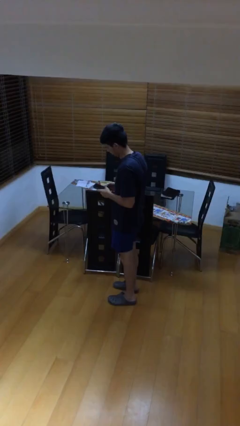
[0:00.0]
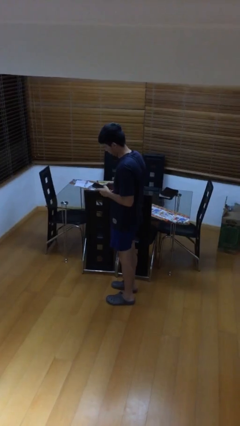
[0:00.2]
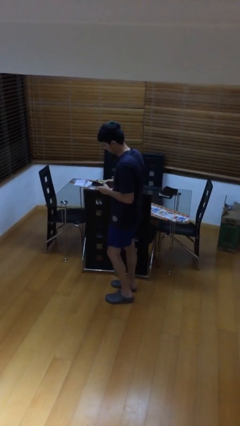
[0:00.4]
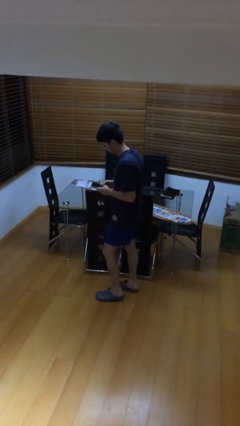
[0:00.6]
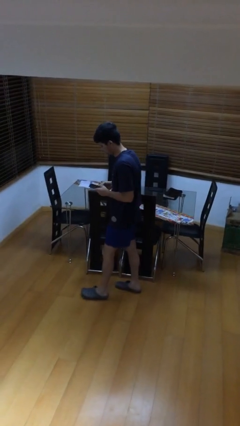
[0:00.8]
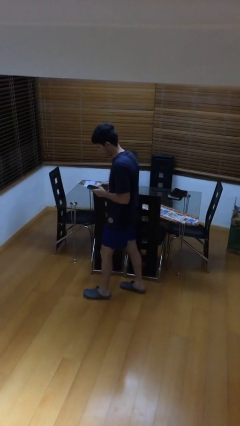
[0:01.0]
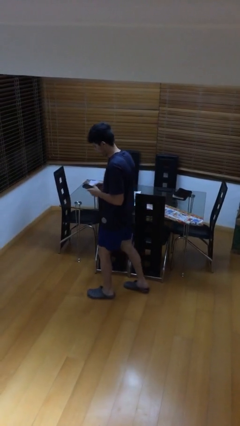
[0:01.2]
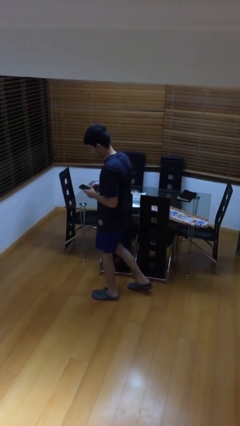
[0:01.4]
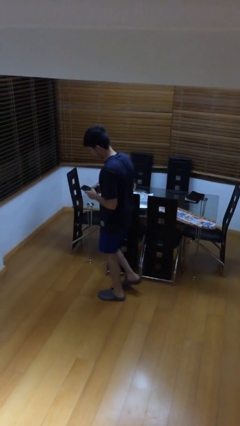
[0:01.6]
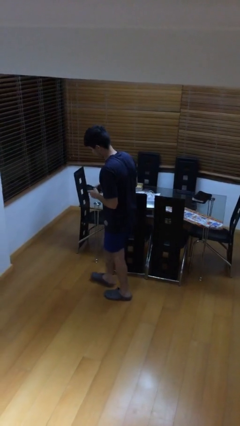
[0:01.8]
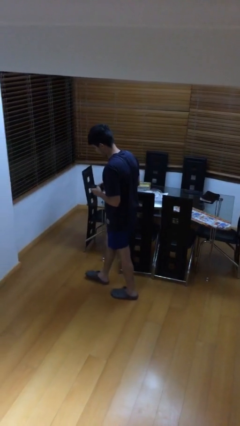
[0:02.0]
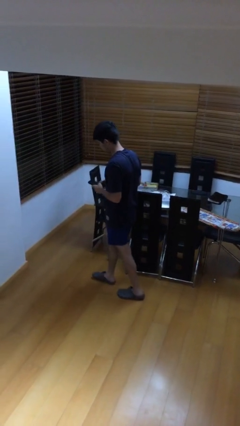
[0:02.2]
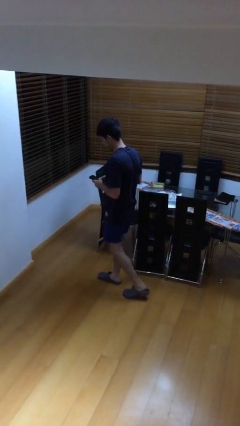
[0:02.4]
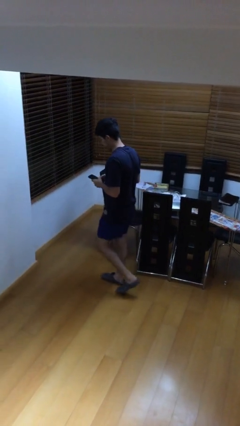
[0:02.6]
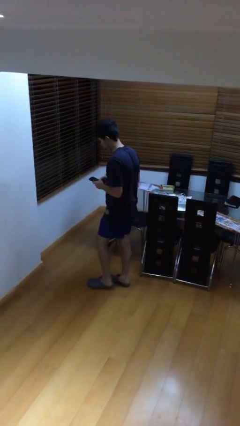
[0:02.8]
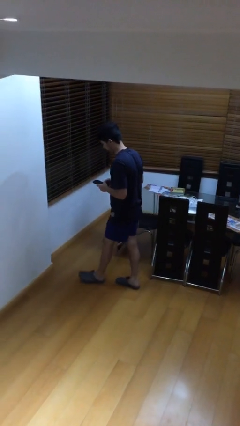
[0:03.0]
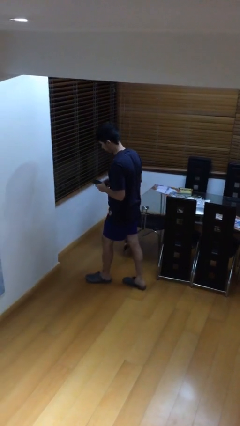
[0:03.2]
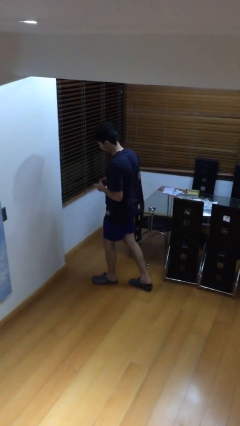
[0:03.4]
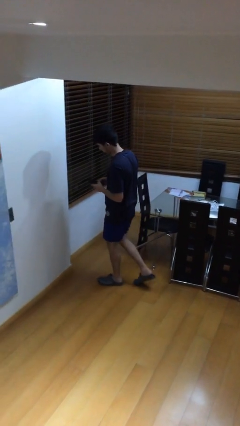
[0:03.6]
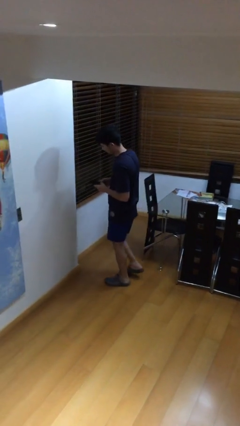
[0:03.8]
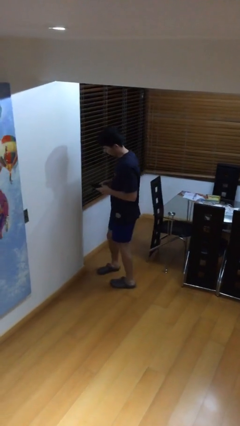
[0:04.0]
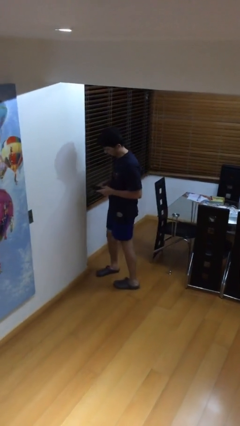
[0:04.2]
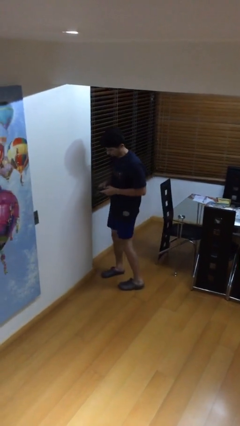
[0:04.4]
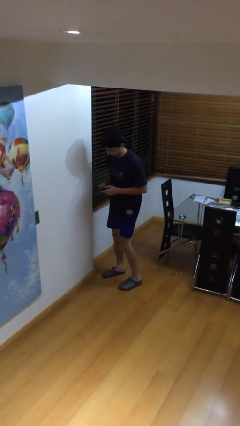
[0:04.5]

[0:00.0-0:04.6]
person texts on phone

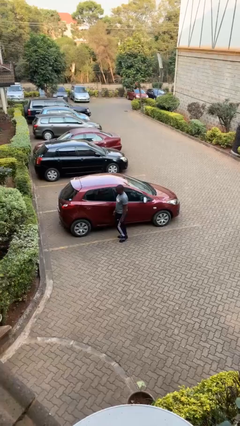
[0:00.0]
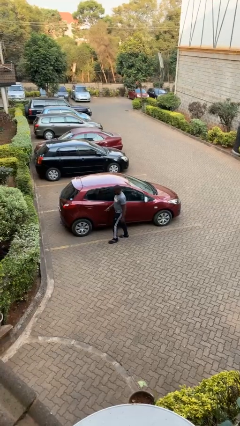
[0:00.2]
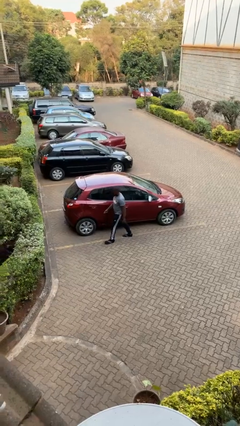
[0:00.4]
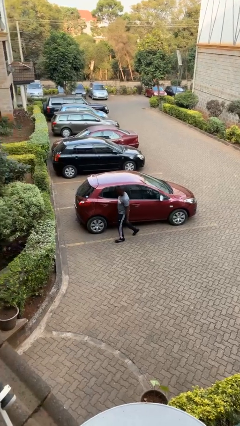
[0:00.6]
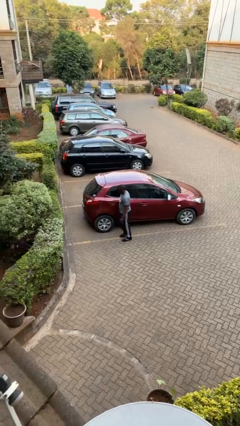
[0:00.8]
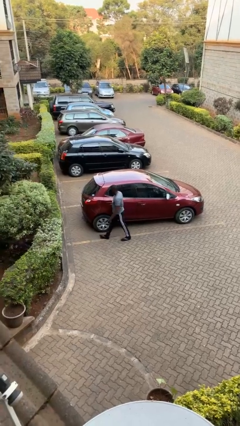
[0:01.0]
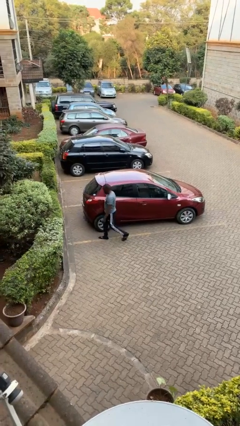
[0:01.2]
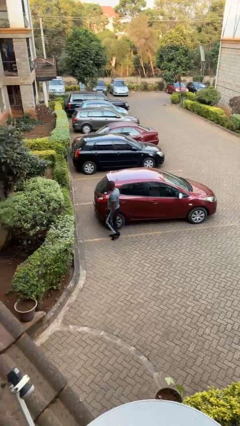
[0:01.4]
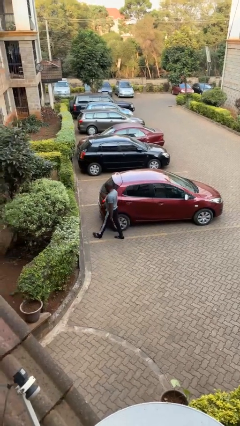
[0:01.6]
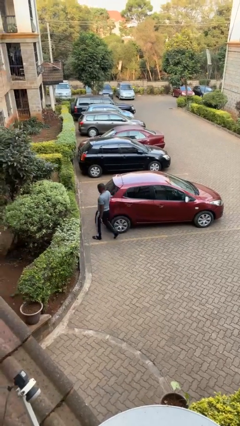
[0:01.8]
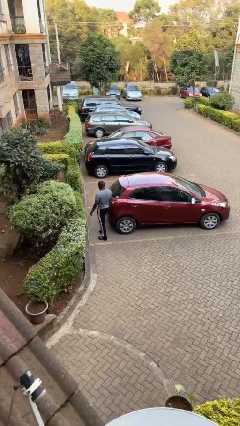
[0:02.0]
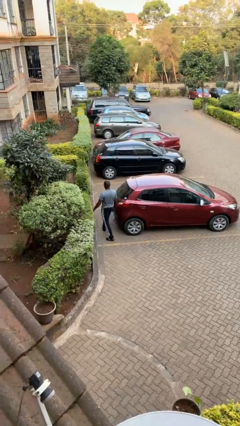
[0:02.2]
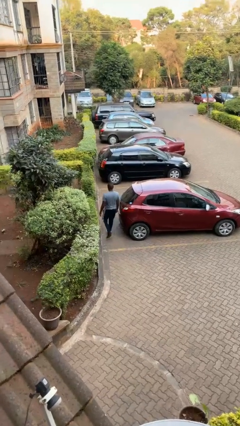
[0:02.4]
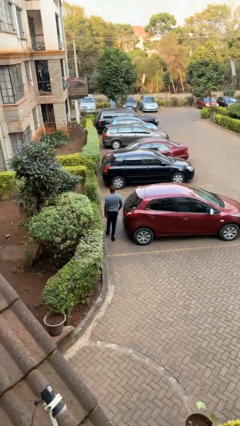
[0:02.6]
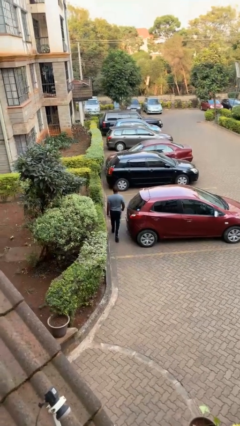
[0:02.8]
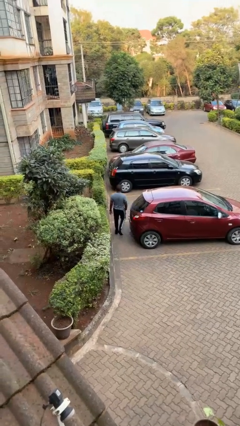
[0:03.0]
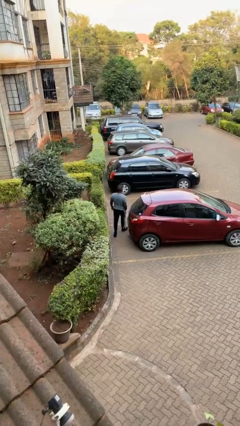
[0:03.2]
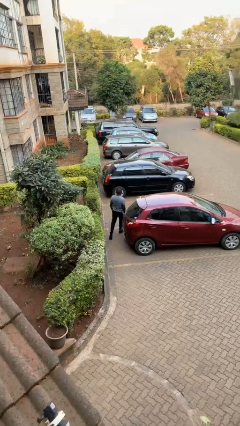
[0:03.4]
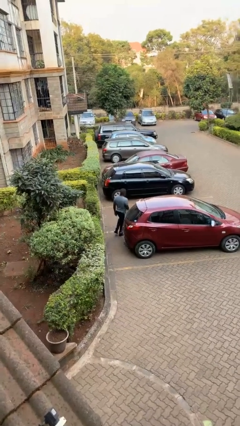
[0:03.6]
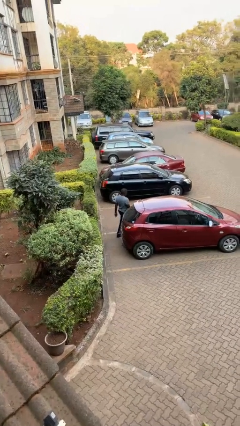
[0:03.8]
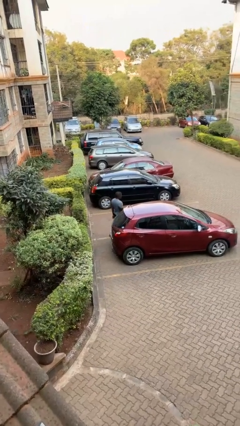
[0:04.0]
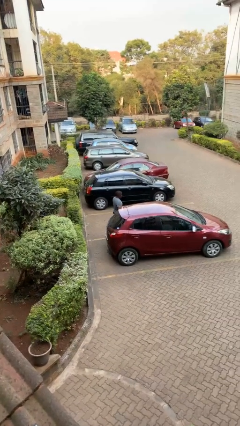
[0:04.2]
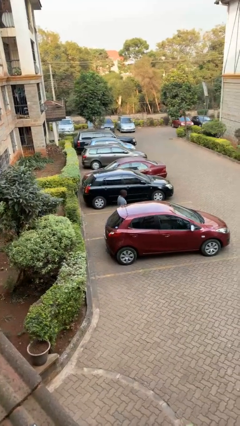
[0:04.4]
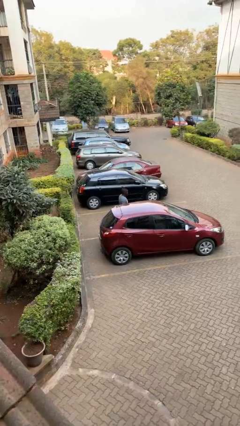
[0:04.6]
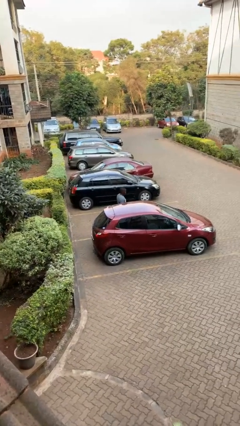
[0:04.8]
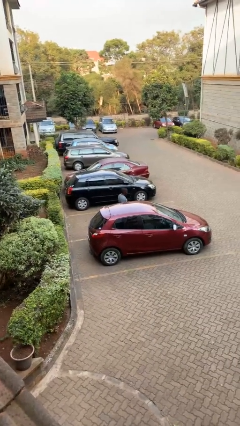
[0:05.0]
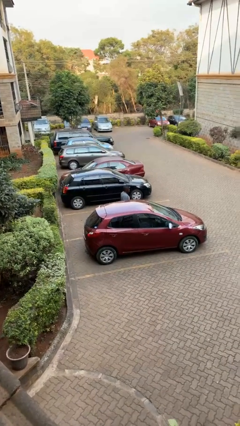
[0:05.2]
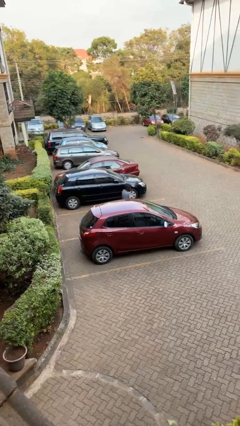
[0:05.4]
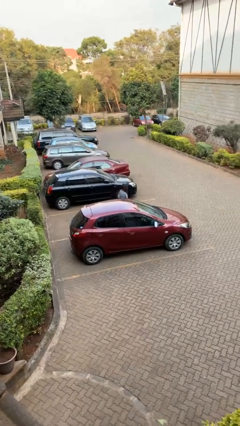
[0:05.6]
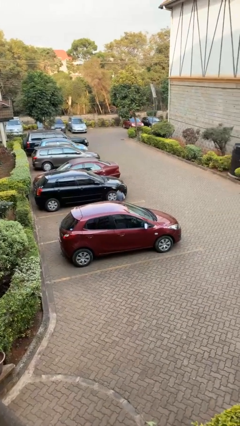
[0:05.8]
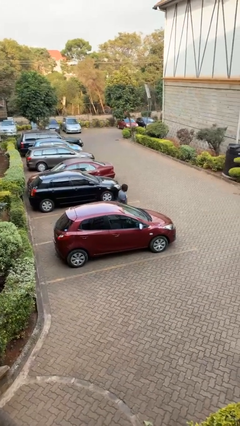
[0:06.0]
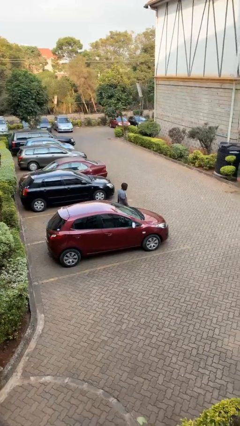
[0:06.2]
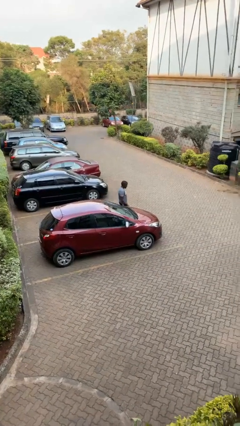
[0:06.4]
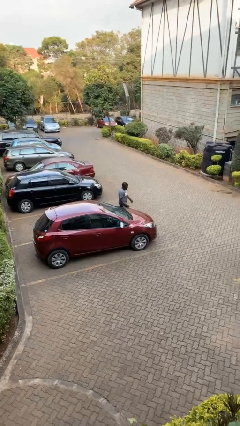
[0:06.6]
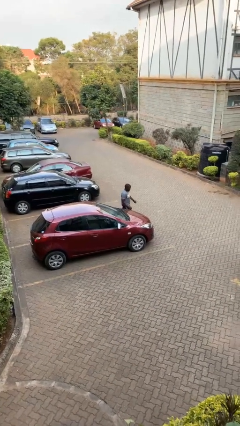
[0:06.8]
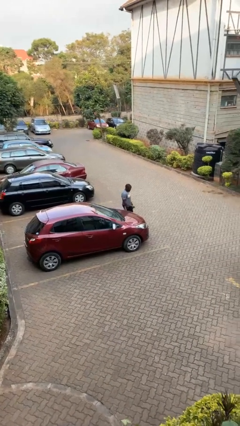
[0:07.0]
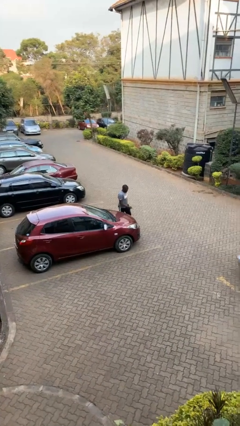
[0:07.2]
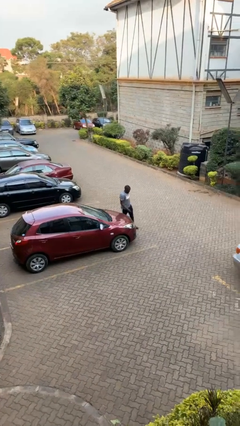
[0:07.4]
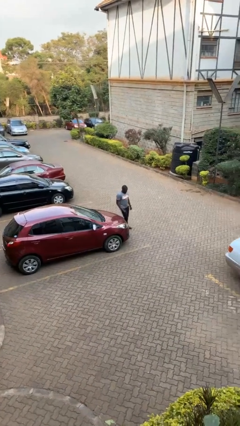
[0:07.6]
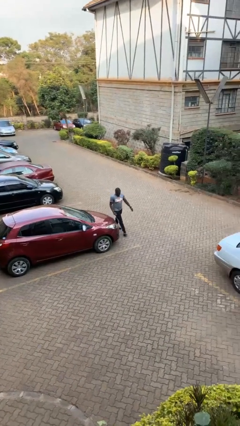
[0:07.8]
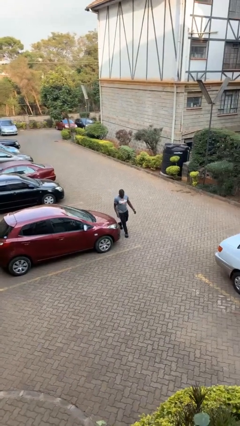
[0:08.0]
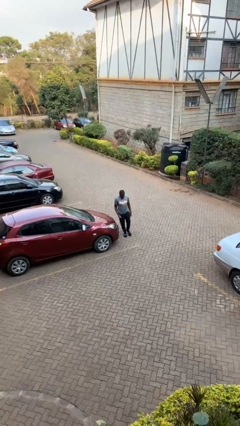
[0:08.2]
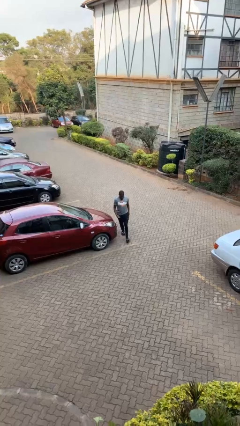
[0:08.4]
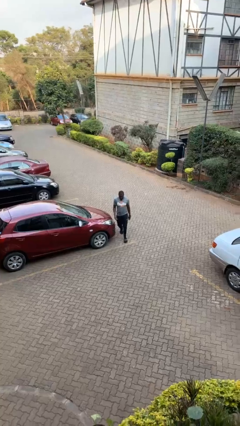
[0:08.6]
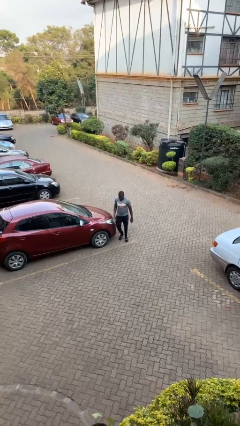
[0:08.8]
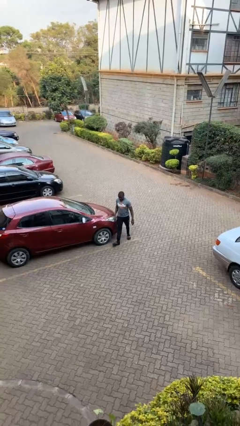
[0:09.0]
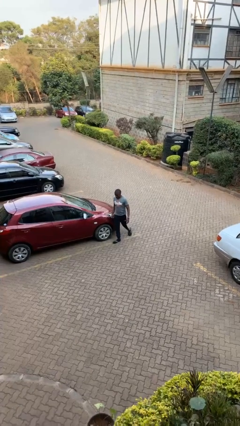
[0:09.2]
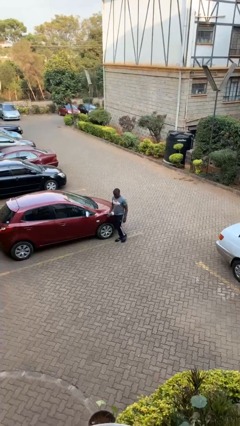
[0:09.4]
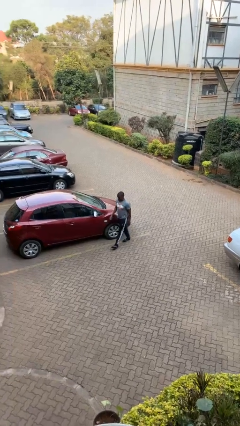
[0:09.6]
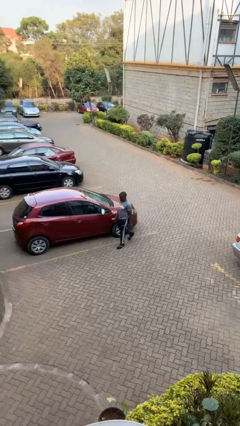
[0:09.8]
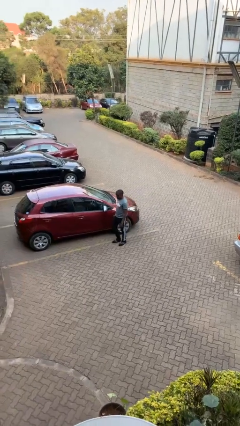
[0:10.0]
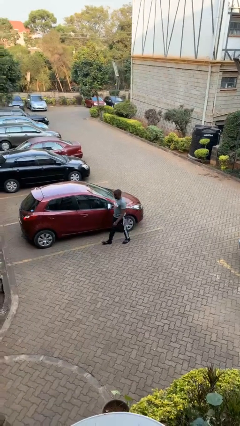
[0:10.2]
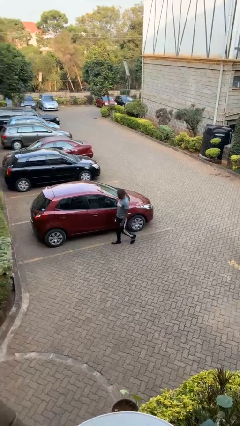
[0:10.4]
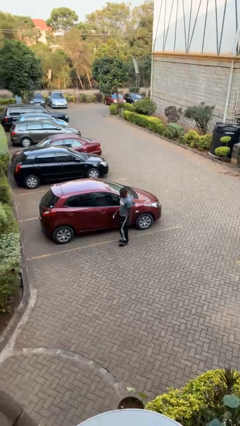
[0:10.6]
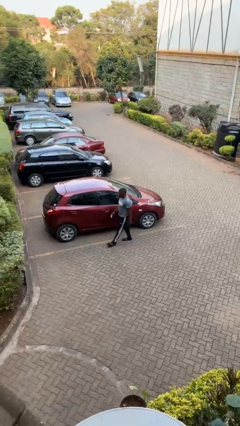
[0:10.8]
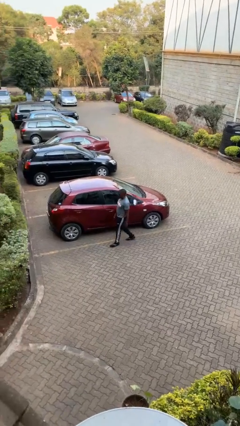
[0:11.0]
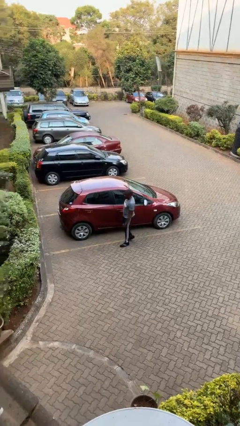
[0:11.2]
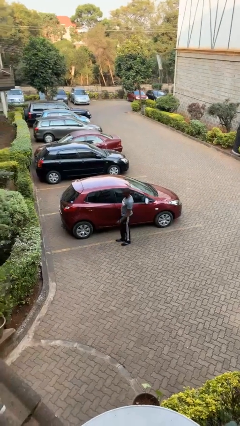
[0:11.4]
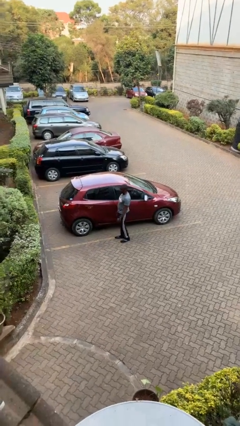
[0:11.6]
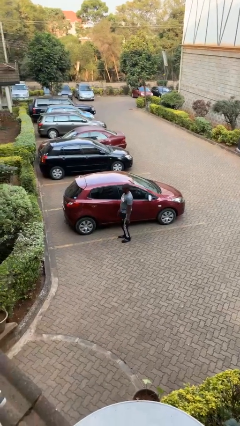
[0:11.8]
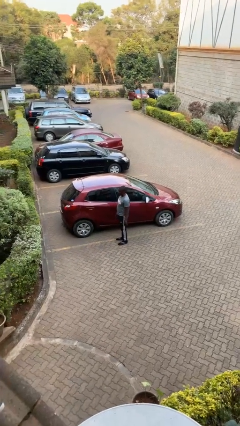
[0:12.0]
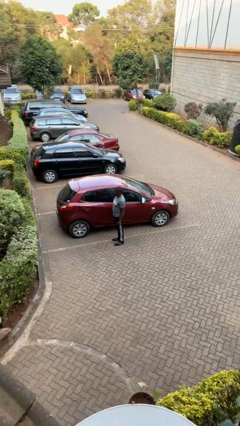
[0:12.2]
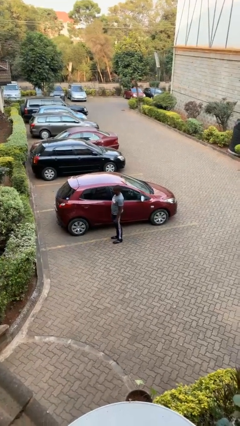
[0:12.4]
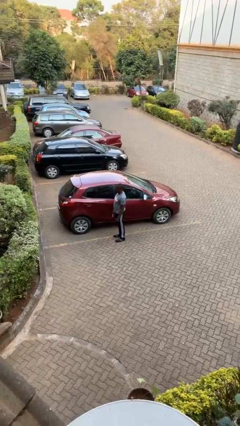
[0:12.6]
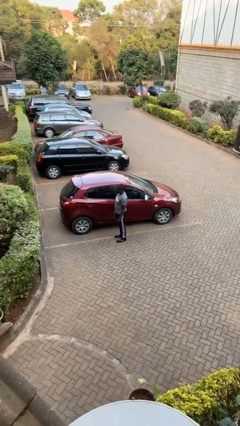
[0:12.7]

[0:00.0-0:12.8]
person walks around car

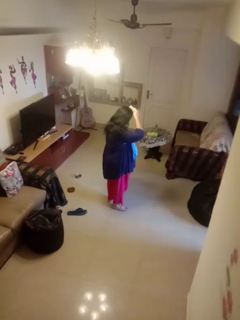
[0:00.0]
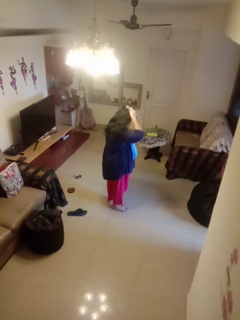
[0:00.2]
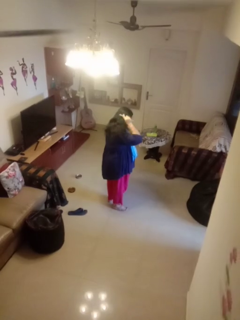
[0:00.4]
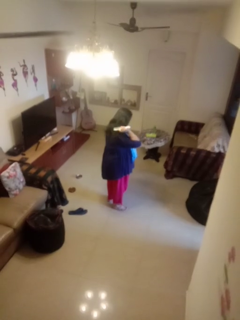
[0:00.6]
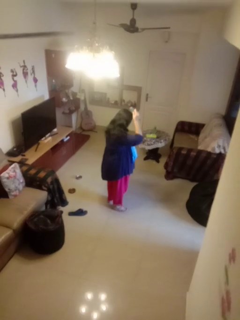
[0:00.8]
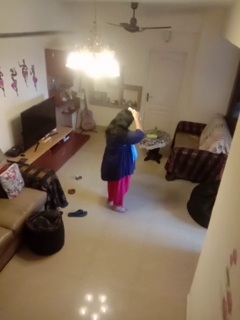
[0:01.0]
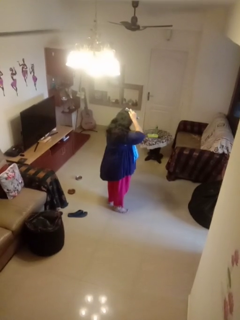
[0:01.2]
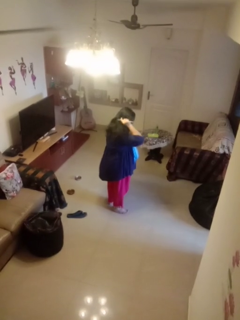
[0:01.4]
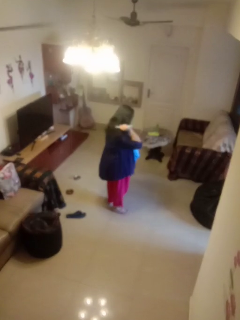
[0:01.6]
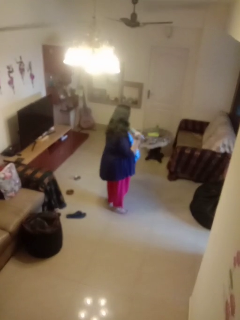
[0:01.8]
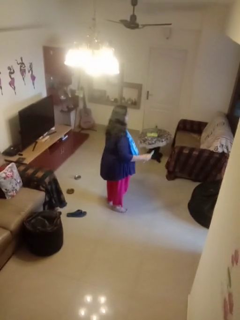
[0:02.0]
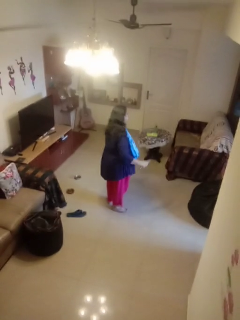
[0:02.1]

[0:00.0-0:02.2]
person brushes hair
